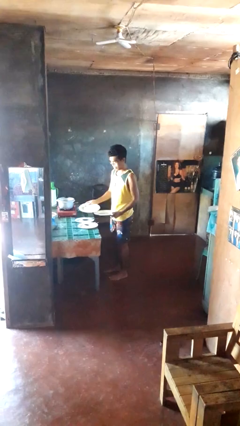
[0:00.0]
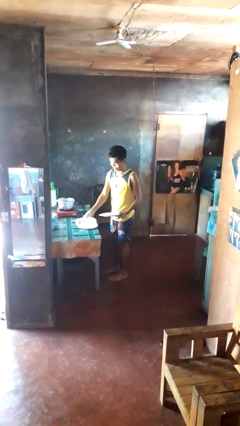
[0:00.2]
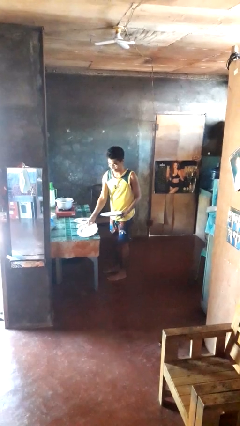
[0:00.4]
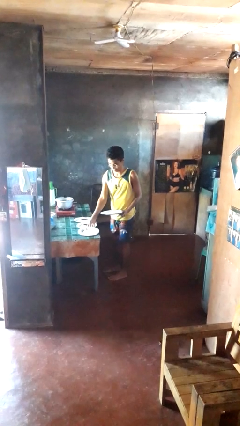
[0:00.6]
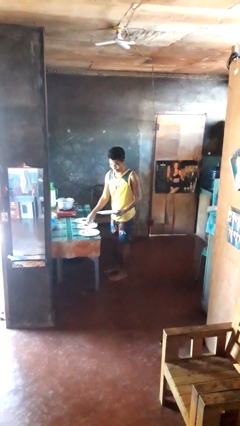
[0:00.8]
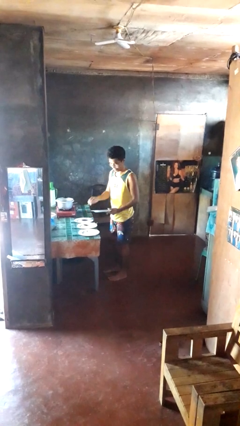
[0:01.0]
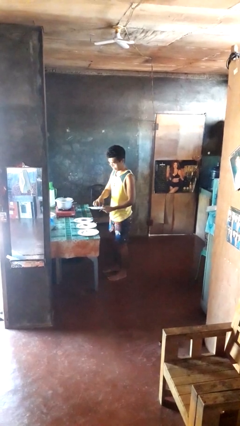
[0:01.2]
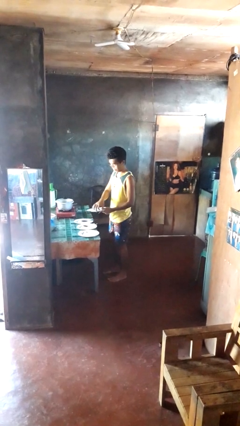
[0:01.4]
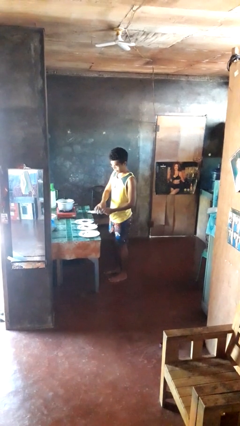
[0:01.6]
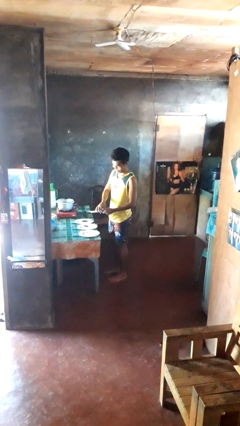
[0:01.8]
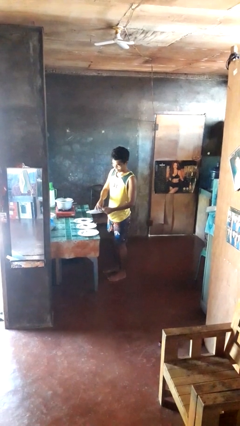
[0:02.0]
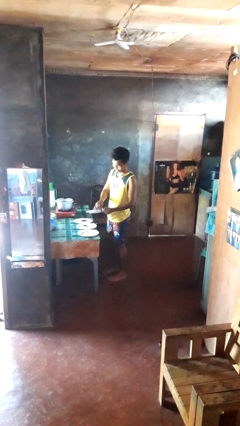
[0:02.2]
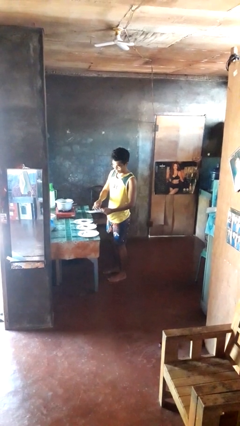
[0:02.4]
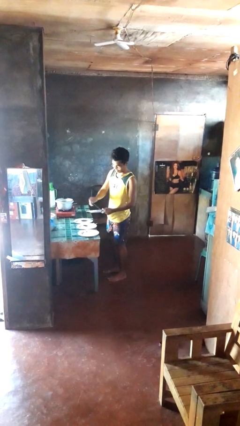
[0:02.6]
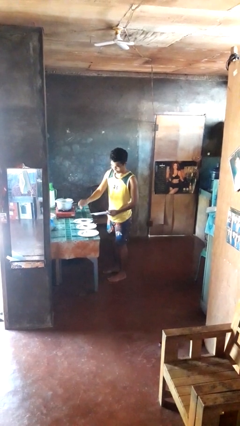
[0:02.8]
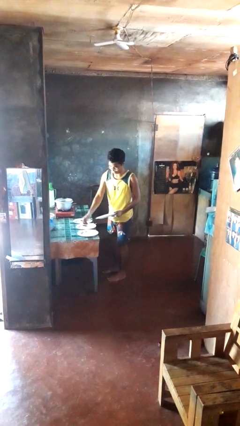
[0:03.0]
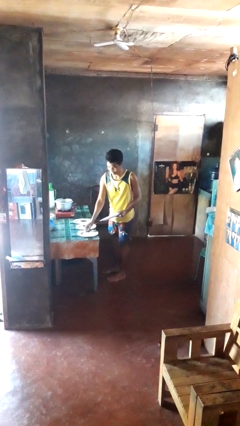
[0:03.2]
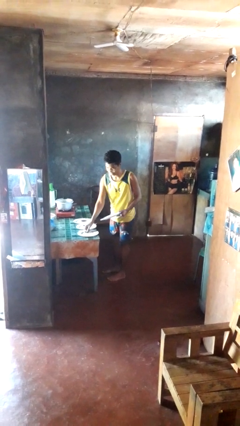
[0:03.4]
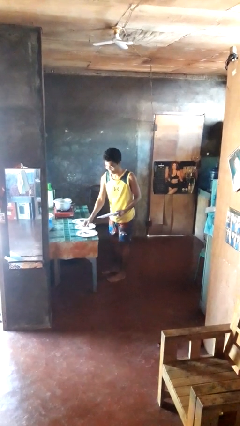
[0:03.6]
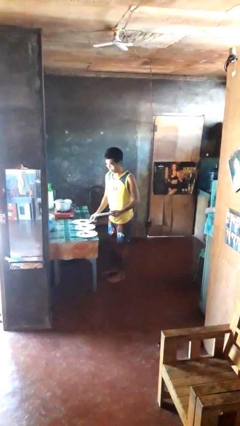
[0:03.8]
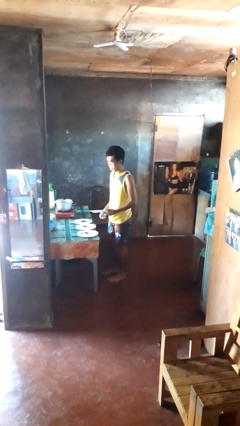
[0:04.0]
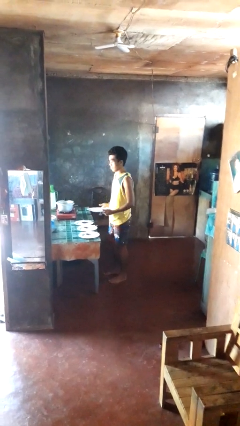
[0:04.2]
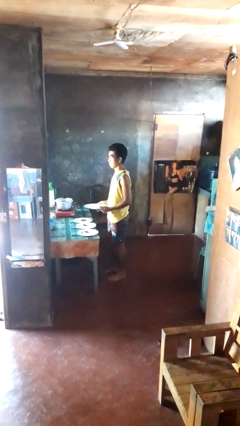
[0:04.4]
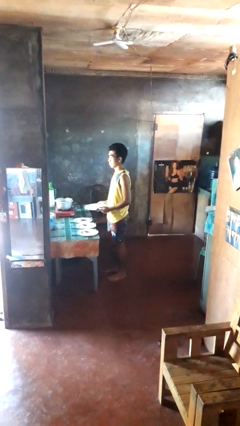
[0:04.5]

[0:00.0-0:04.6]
person sets table

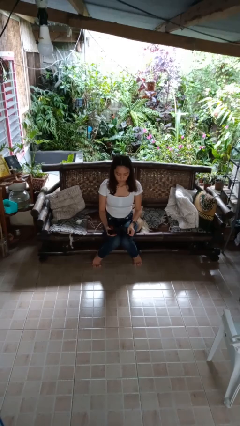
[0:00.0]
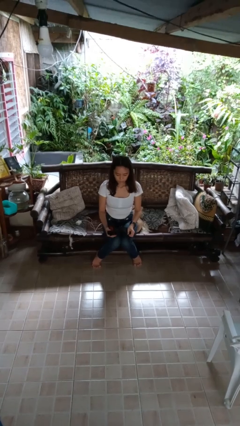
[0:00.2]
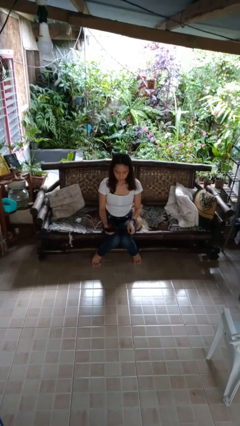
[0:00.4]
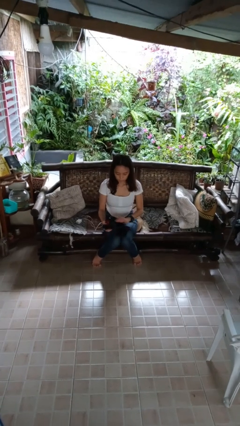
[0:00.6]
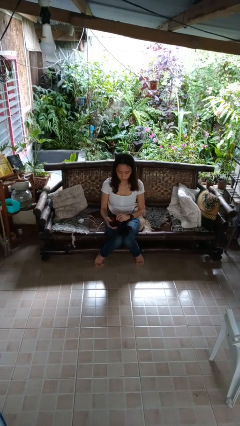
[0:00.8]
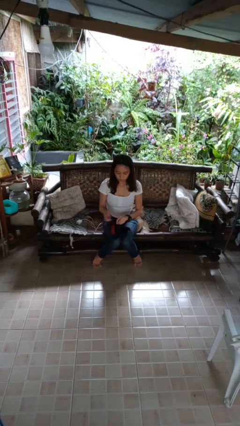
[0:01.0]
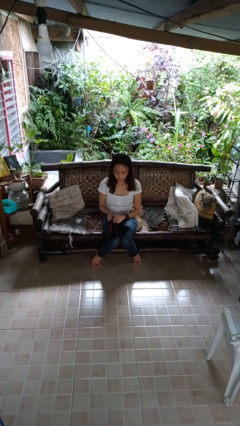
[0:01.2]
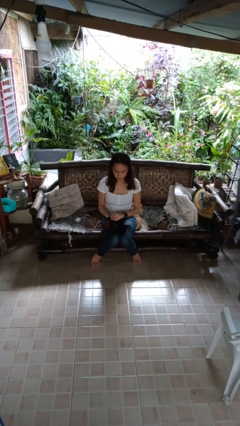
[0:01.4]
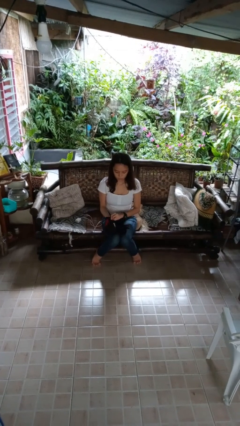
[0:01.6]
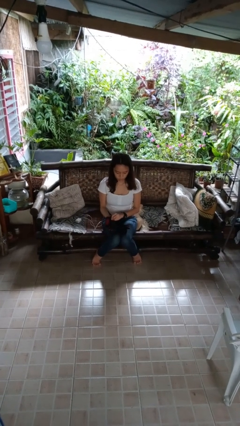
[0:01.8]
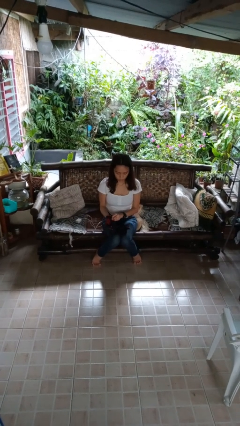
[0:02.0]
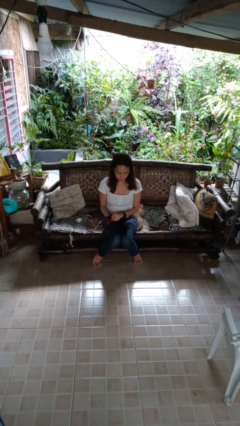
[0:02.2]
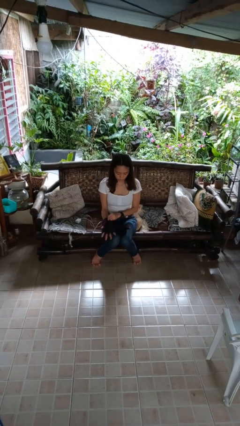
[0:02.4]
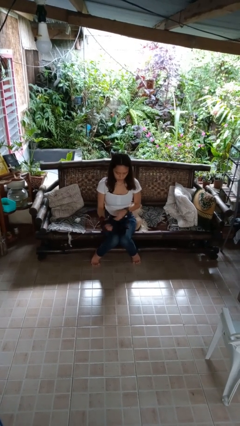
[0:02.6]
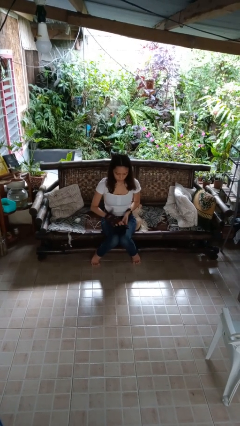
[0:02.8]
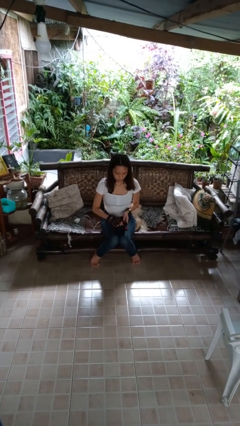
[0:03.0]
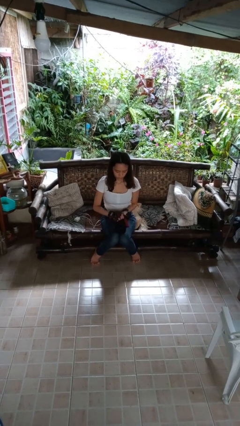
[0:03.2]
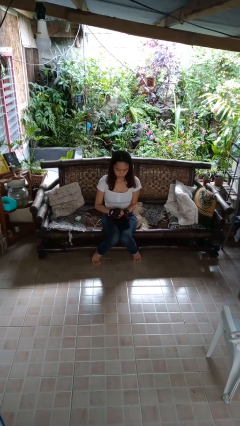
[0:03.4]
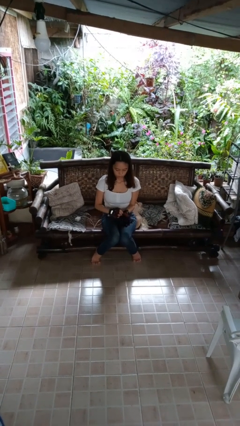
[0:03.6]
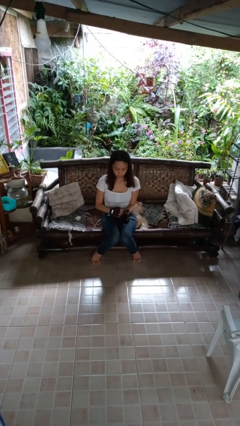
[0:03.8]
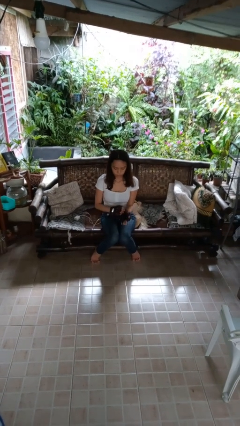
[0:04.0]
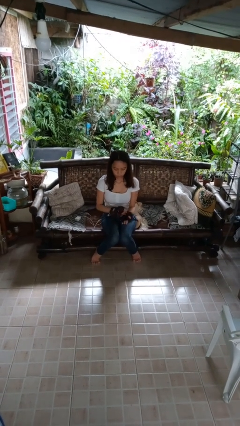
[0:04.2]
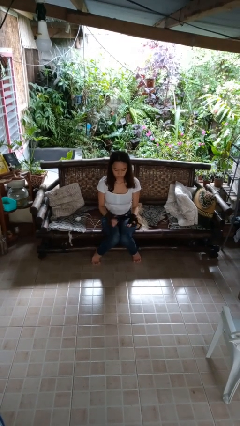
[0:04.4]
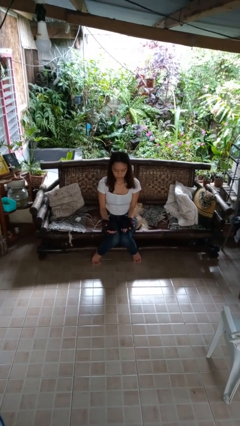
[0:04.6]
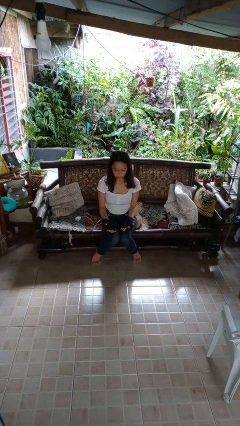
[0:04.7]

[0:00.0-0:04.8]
person puts on gloves

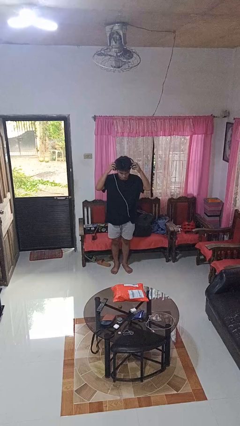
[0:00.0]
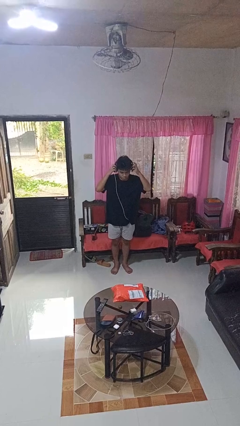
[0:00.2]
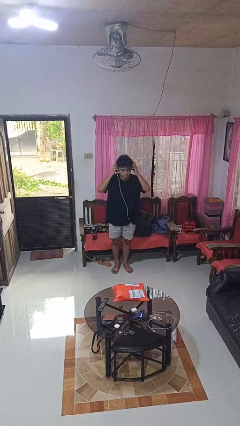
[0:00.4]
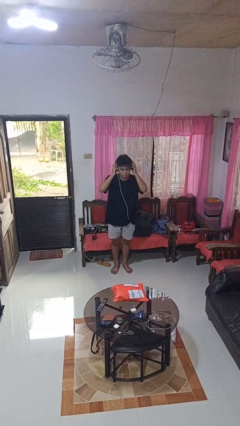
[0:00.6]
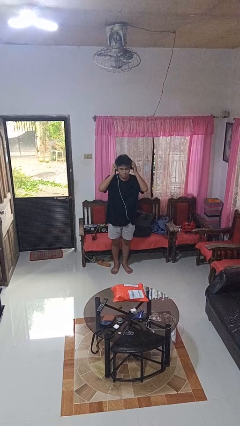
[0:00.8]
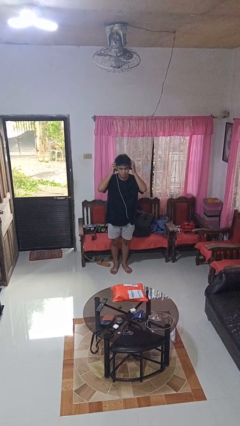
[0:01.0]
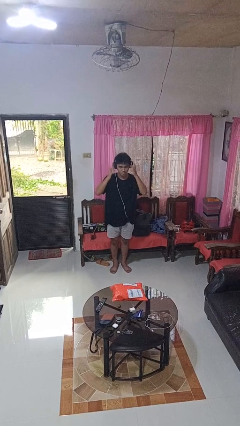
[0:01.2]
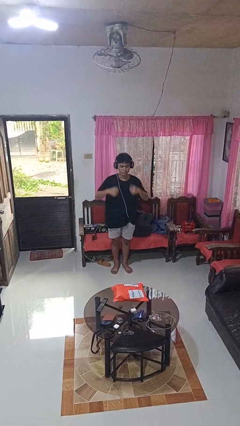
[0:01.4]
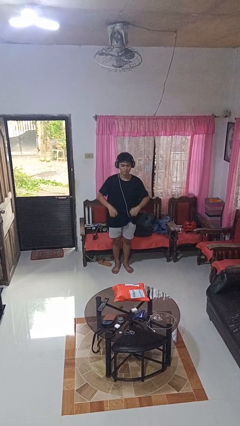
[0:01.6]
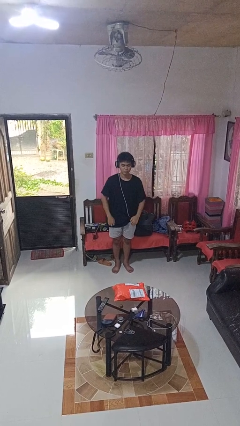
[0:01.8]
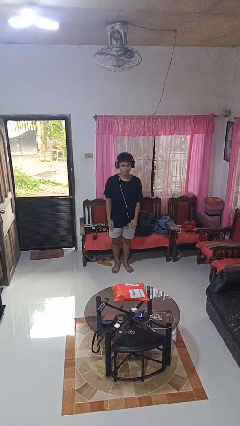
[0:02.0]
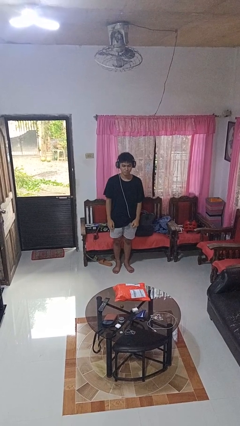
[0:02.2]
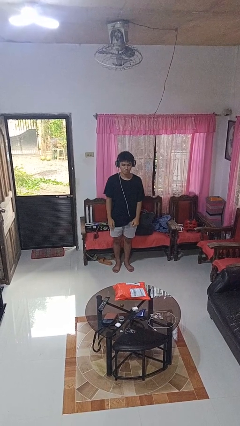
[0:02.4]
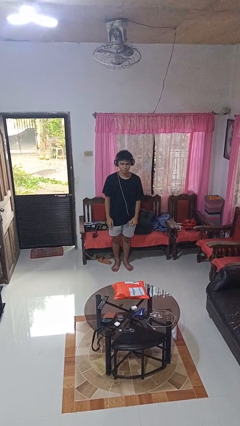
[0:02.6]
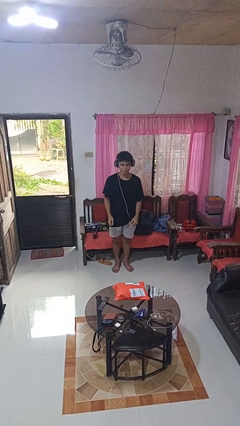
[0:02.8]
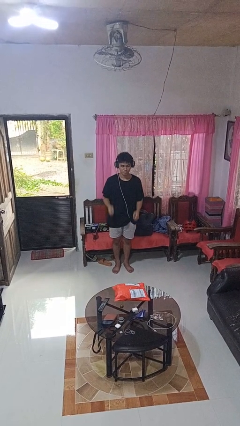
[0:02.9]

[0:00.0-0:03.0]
person puts on headphones

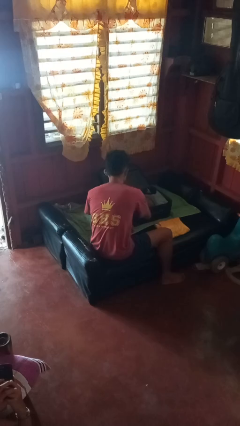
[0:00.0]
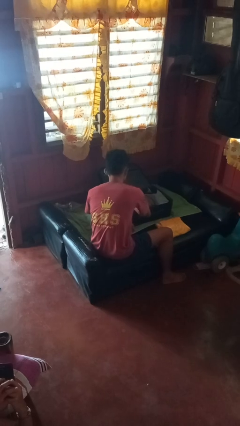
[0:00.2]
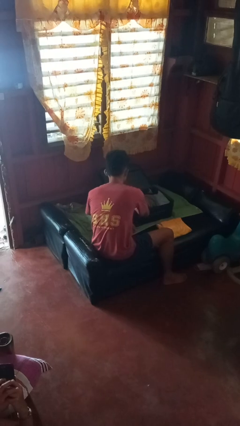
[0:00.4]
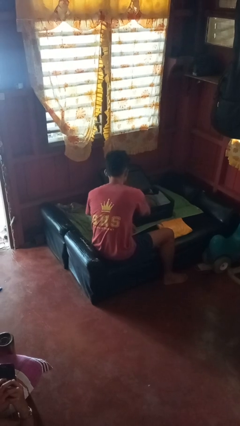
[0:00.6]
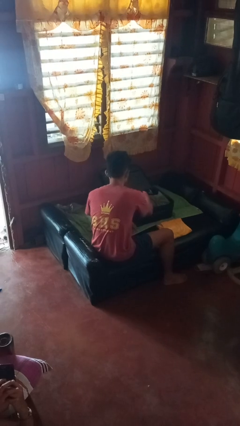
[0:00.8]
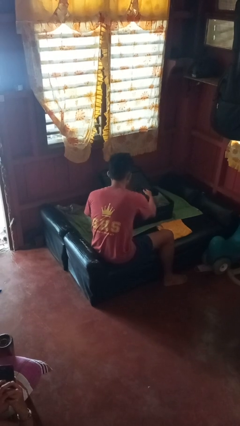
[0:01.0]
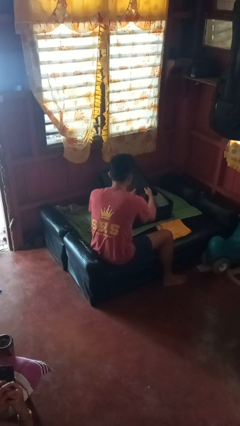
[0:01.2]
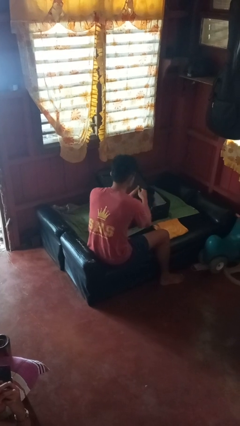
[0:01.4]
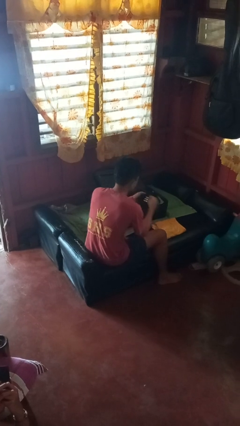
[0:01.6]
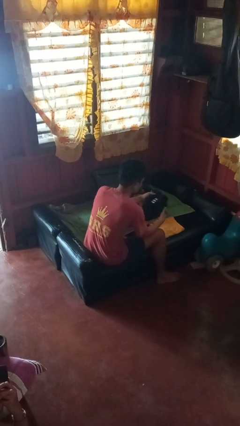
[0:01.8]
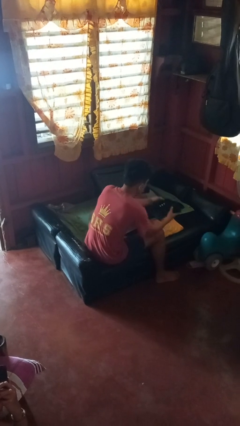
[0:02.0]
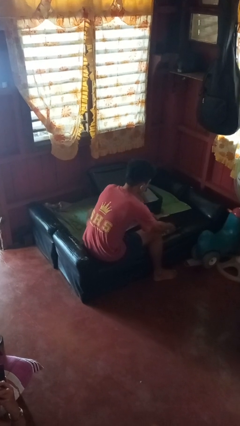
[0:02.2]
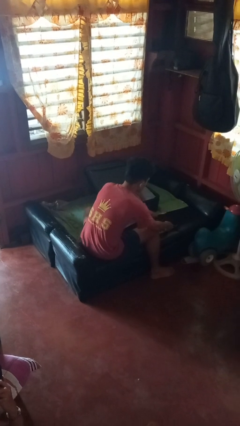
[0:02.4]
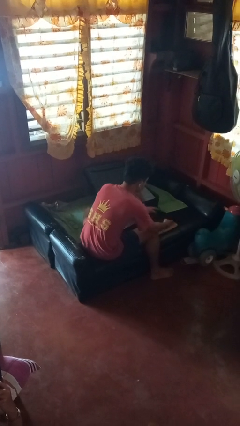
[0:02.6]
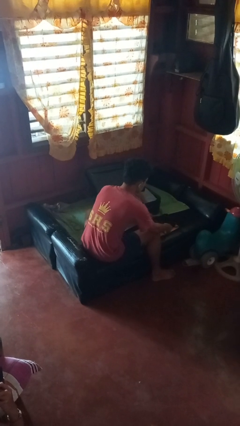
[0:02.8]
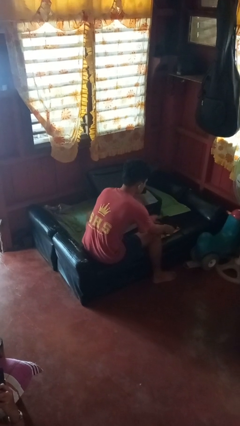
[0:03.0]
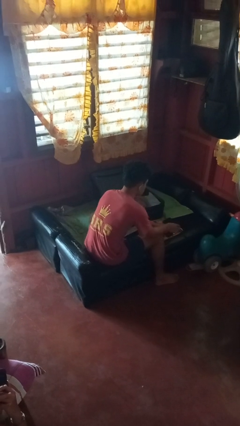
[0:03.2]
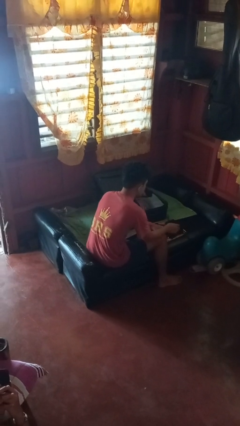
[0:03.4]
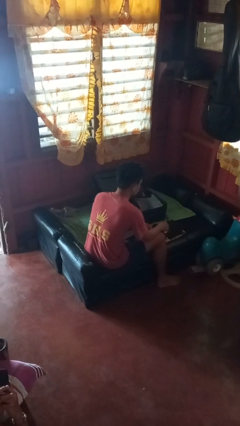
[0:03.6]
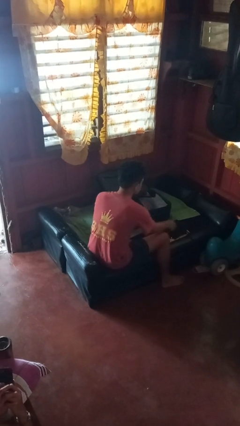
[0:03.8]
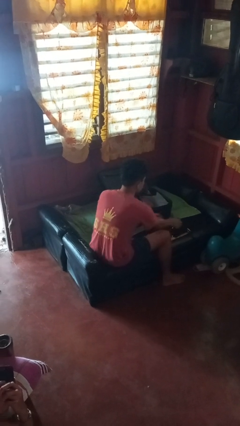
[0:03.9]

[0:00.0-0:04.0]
person unloads clothes from suitcase

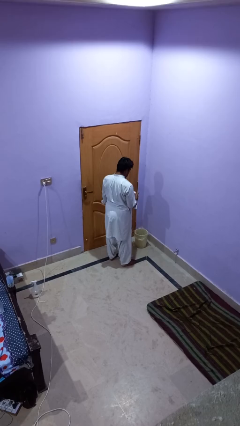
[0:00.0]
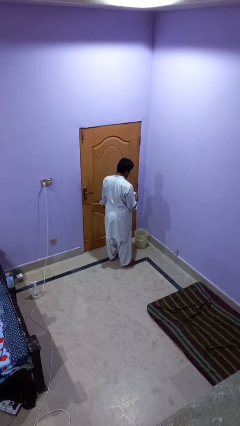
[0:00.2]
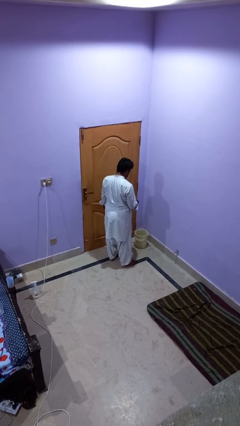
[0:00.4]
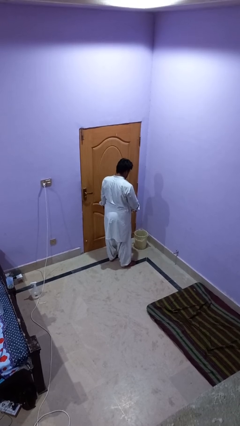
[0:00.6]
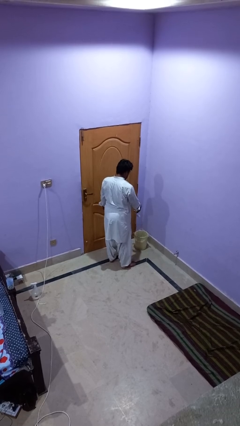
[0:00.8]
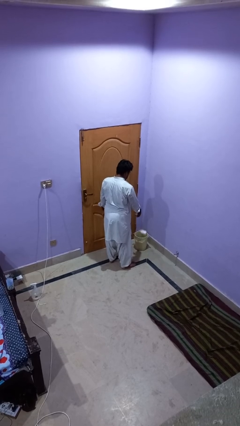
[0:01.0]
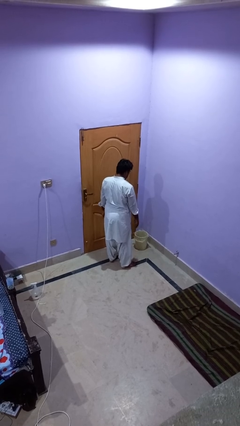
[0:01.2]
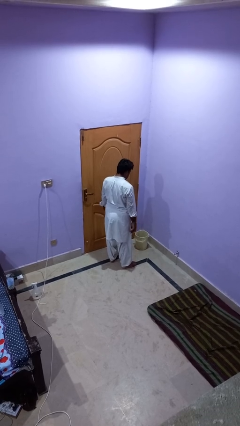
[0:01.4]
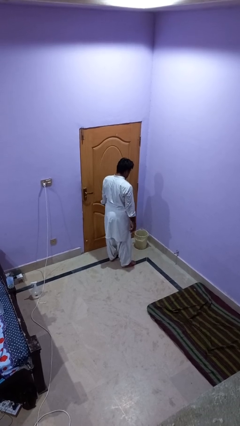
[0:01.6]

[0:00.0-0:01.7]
person discards trash
